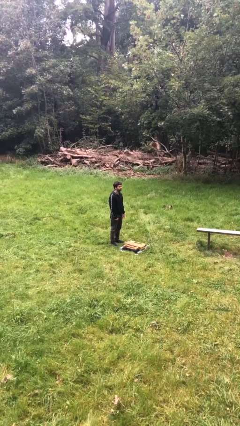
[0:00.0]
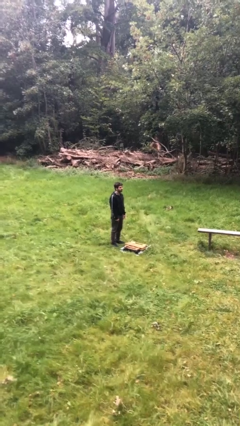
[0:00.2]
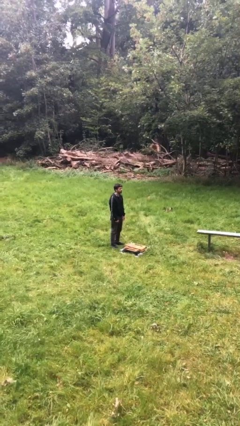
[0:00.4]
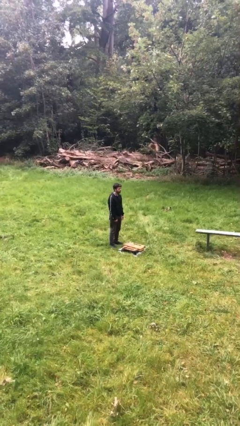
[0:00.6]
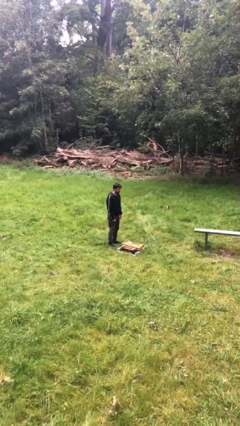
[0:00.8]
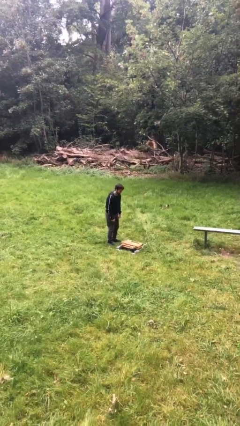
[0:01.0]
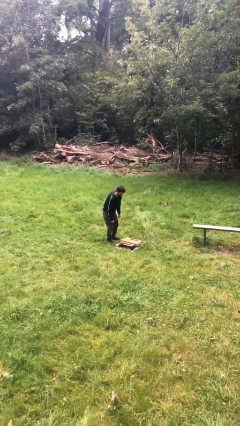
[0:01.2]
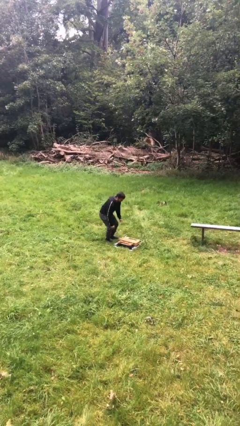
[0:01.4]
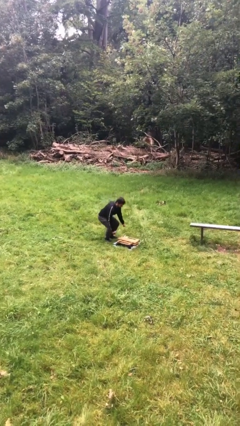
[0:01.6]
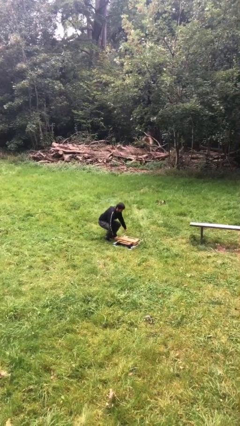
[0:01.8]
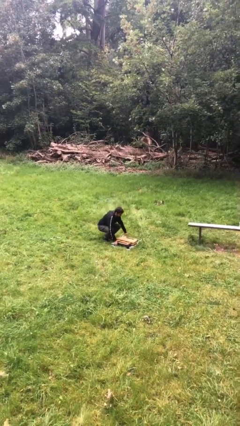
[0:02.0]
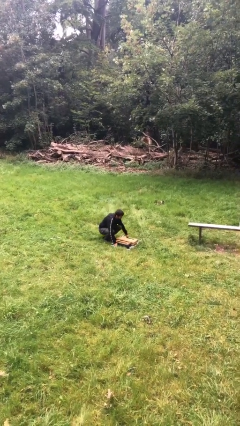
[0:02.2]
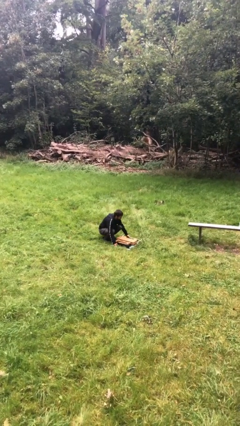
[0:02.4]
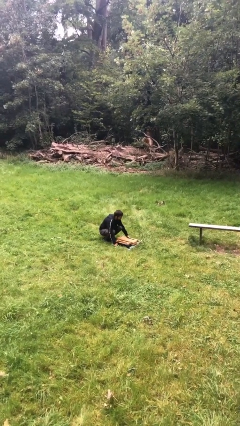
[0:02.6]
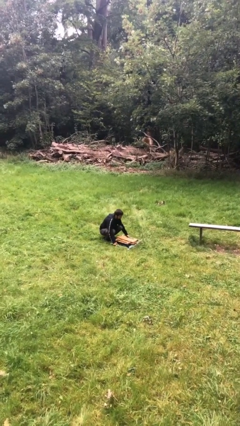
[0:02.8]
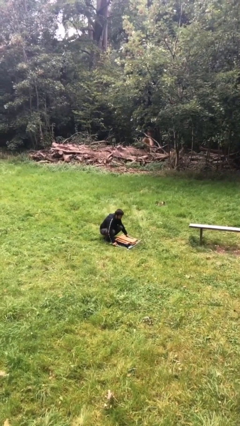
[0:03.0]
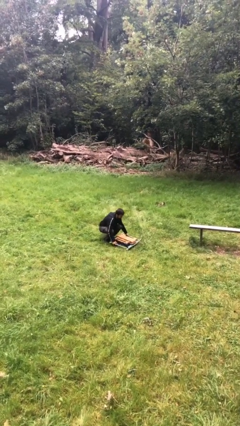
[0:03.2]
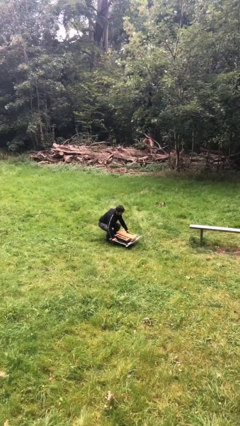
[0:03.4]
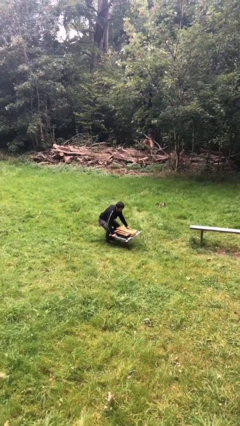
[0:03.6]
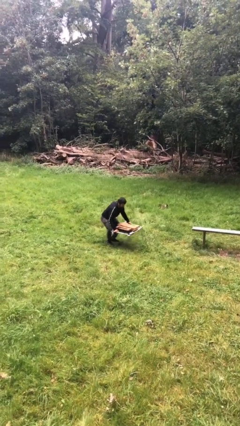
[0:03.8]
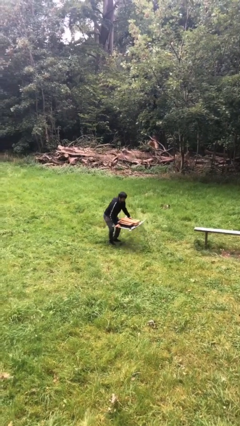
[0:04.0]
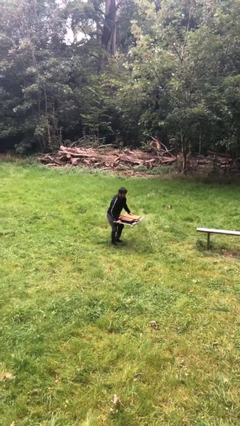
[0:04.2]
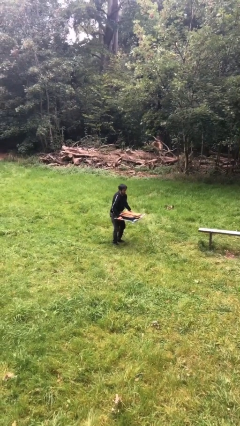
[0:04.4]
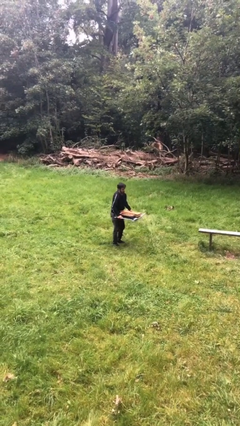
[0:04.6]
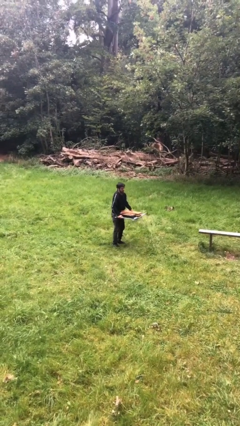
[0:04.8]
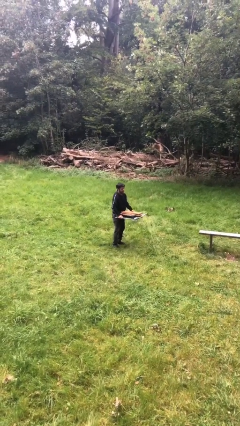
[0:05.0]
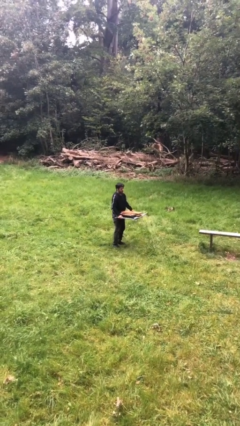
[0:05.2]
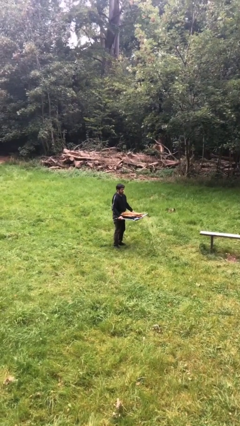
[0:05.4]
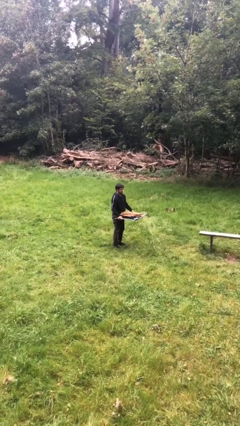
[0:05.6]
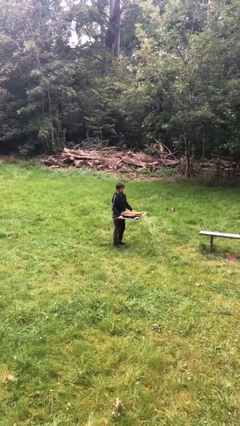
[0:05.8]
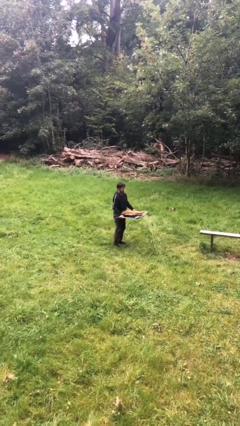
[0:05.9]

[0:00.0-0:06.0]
person picks up object from floor

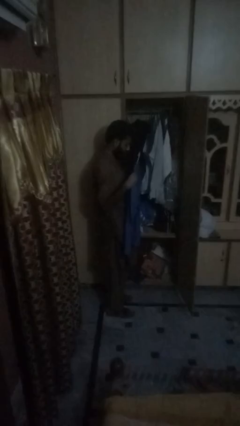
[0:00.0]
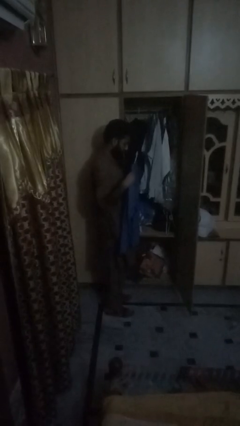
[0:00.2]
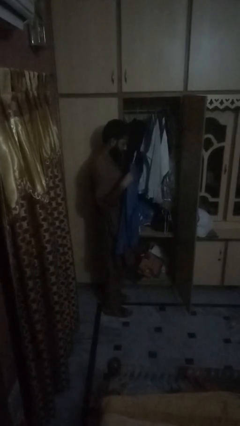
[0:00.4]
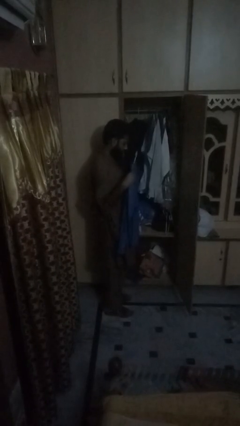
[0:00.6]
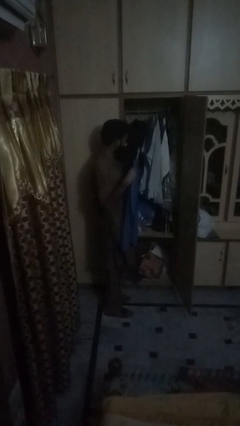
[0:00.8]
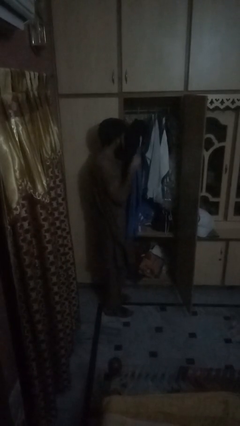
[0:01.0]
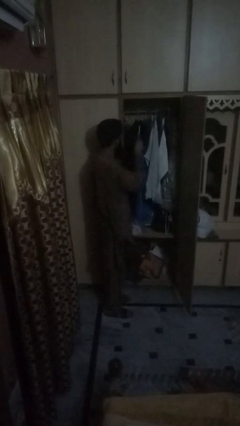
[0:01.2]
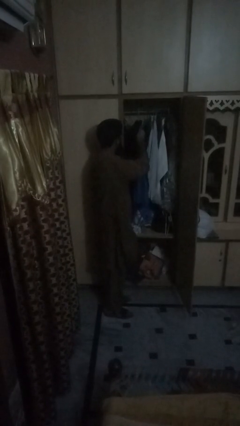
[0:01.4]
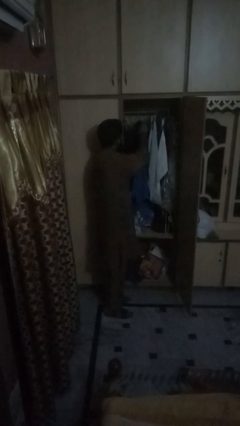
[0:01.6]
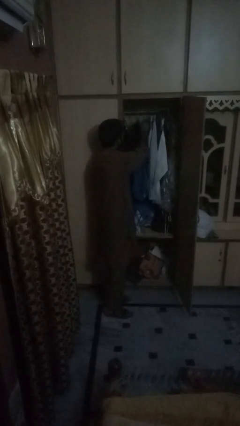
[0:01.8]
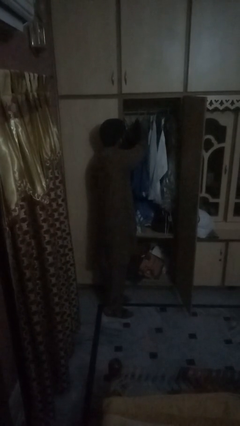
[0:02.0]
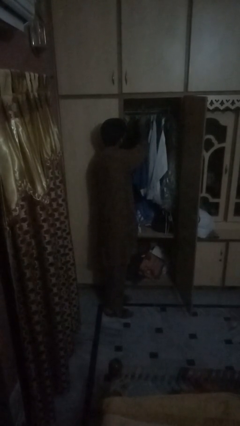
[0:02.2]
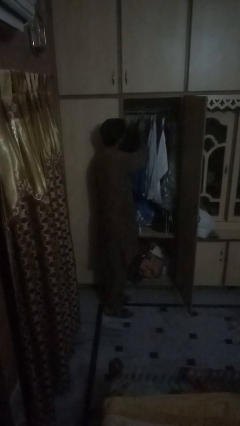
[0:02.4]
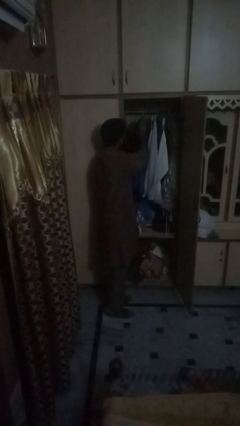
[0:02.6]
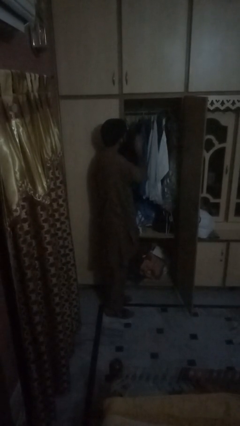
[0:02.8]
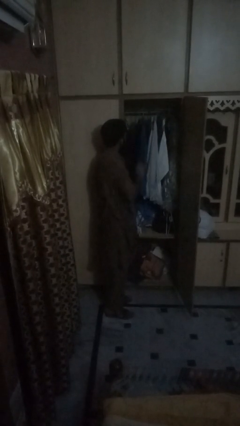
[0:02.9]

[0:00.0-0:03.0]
person takes clothes from dresser

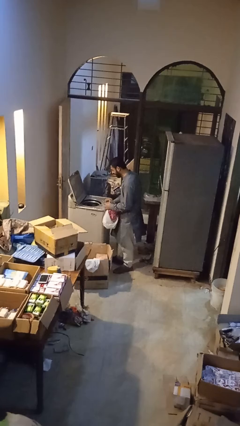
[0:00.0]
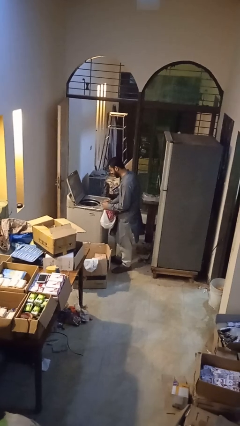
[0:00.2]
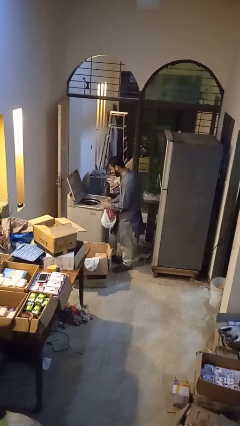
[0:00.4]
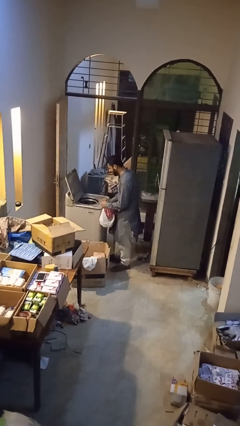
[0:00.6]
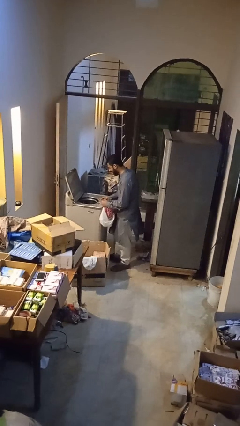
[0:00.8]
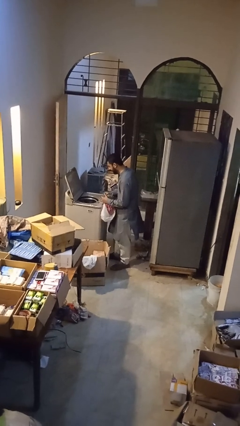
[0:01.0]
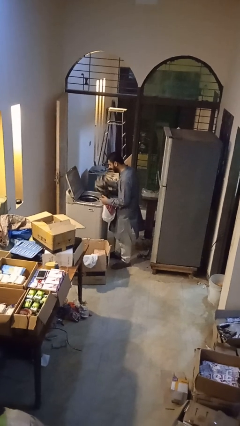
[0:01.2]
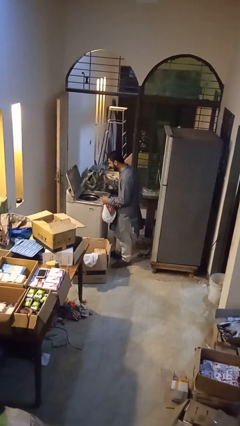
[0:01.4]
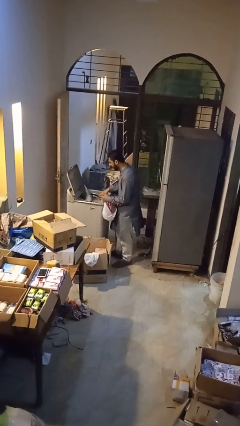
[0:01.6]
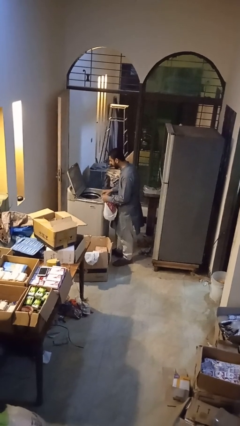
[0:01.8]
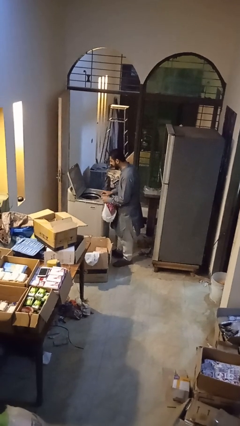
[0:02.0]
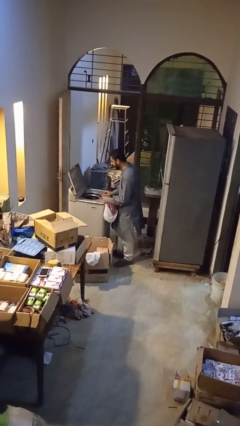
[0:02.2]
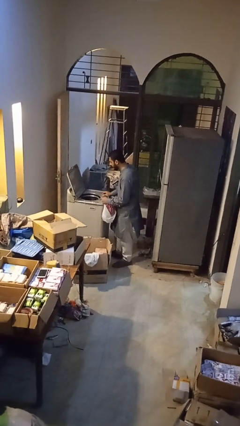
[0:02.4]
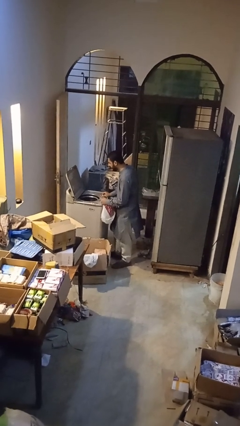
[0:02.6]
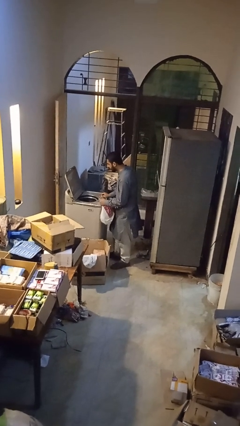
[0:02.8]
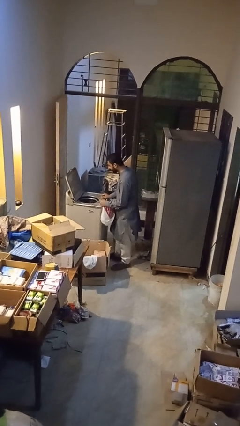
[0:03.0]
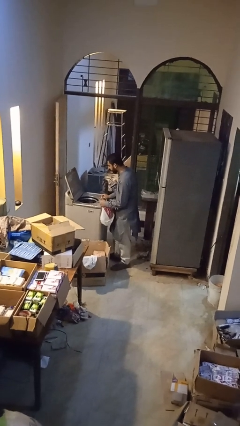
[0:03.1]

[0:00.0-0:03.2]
person loads dryer

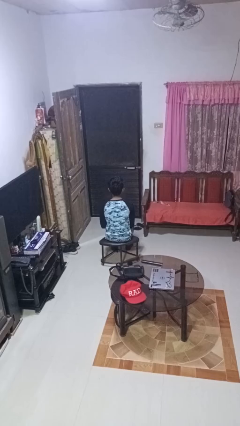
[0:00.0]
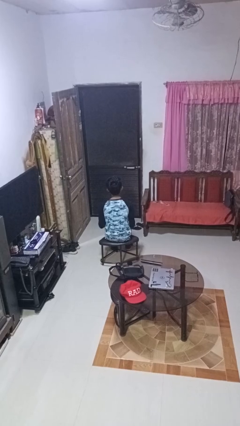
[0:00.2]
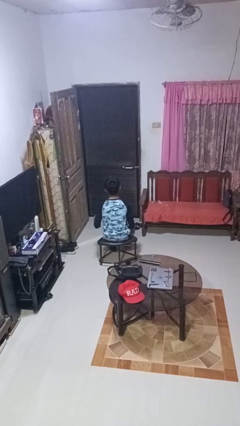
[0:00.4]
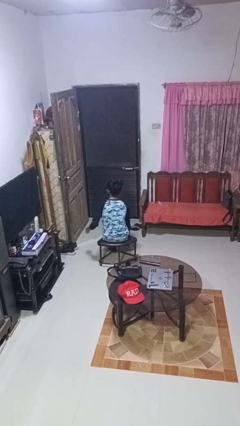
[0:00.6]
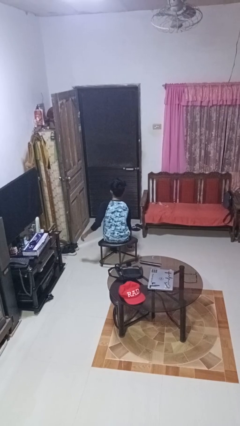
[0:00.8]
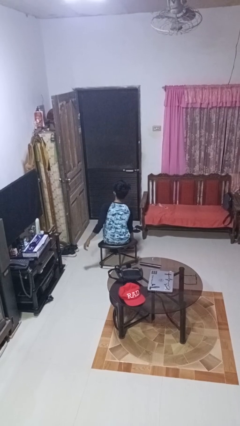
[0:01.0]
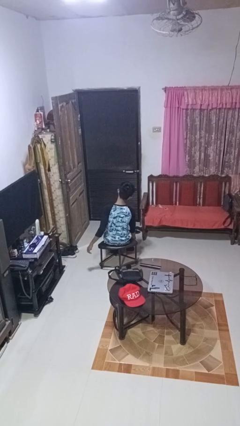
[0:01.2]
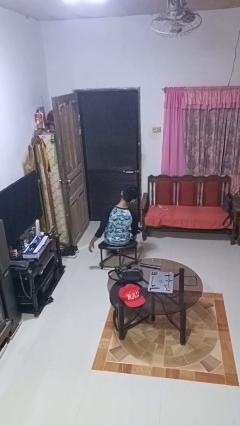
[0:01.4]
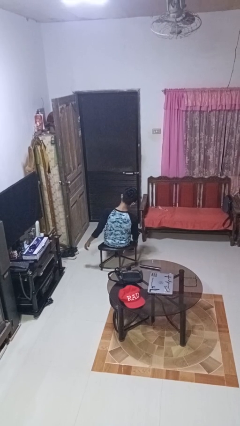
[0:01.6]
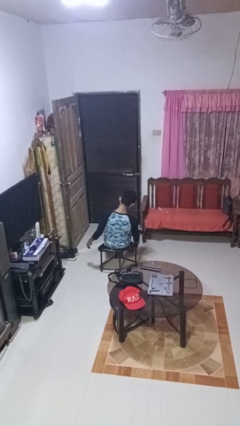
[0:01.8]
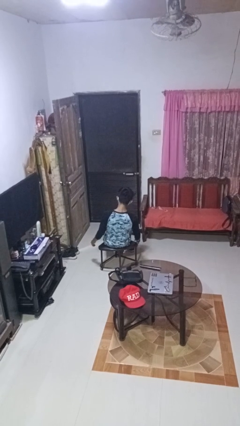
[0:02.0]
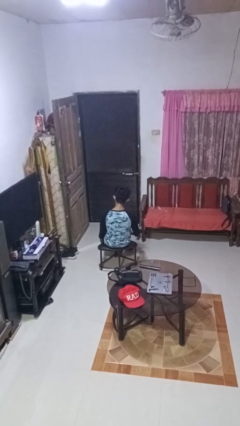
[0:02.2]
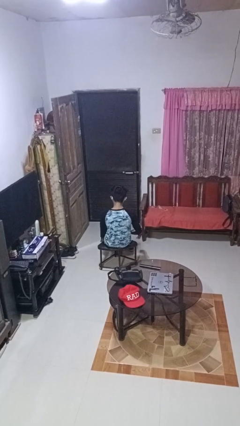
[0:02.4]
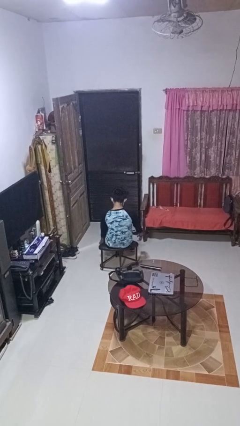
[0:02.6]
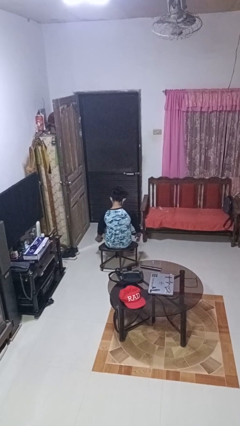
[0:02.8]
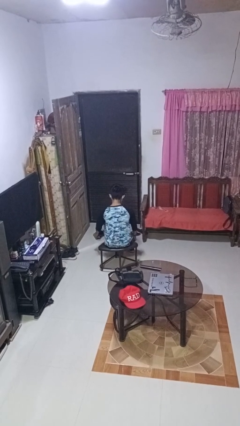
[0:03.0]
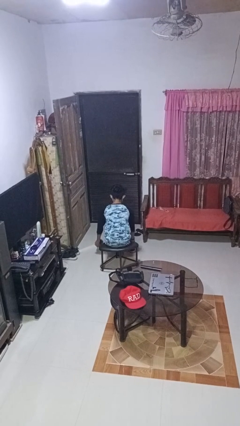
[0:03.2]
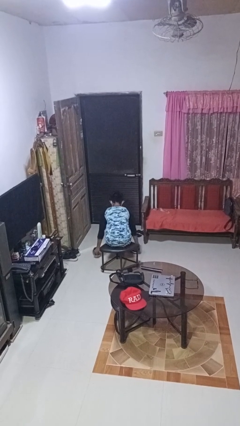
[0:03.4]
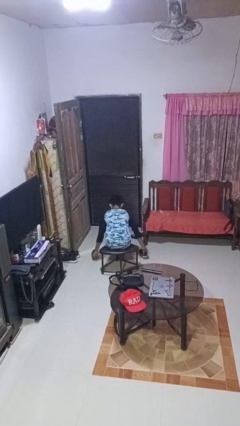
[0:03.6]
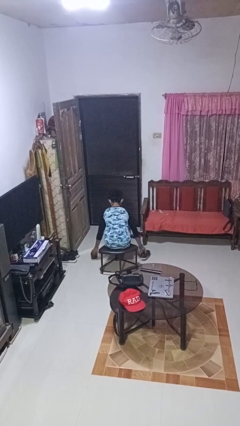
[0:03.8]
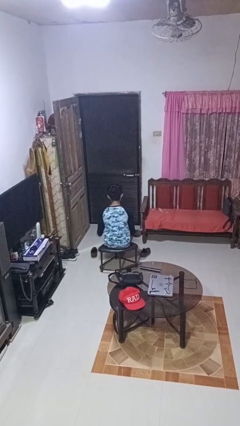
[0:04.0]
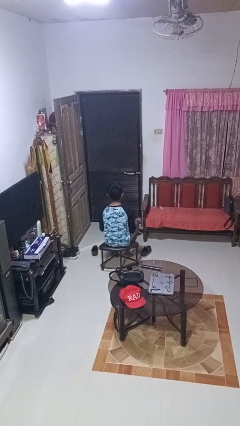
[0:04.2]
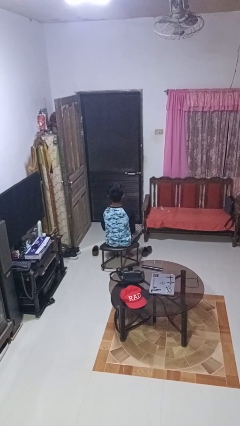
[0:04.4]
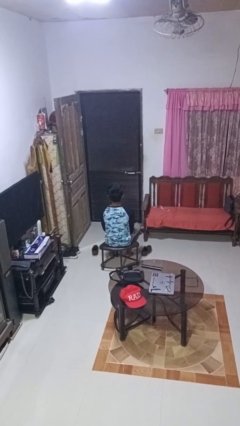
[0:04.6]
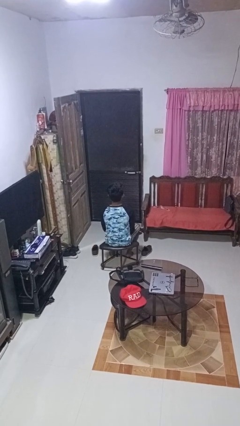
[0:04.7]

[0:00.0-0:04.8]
person takes off shoes

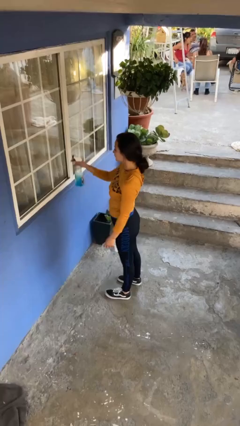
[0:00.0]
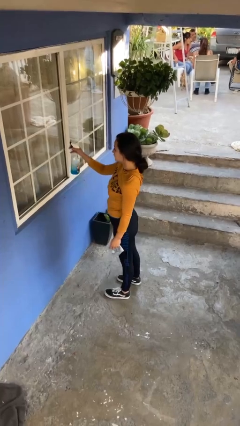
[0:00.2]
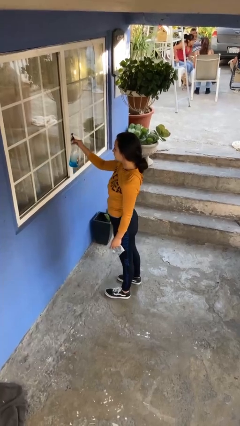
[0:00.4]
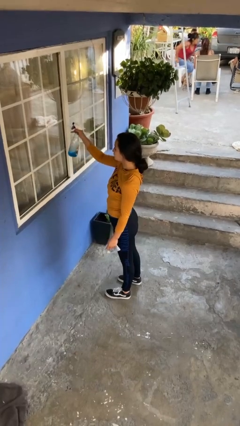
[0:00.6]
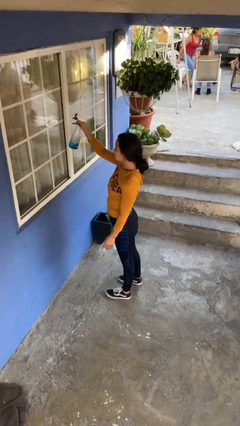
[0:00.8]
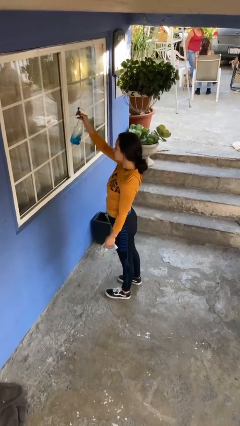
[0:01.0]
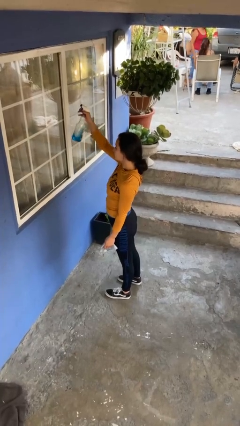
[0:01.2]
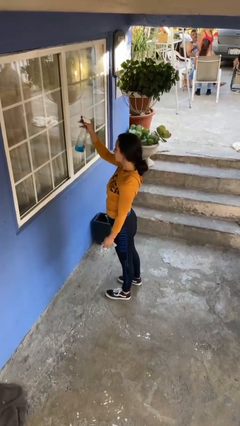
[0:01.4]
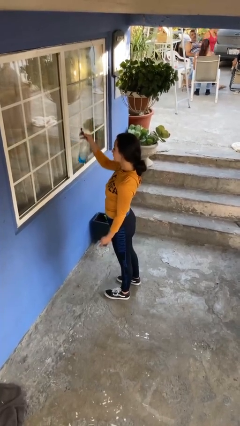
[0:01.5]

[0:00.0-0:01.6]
person sprays from bottle
